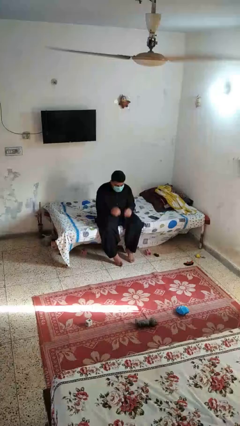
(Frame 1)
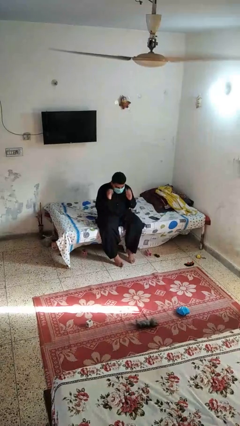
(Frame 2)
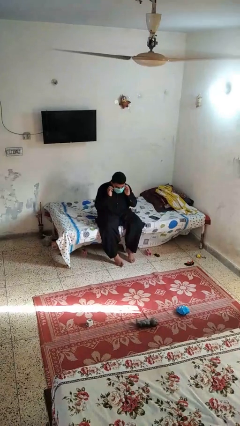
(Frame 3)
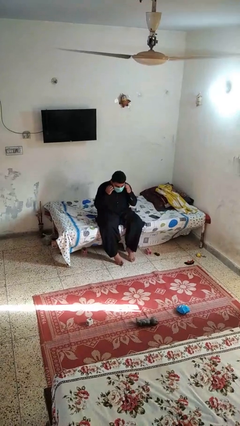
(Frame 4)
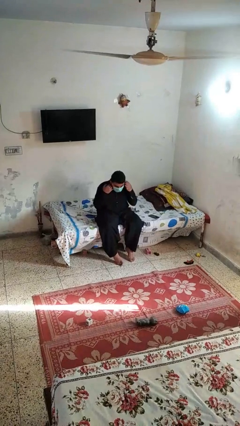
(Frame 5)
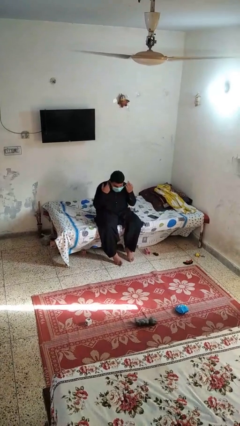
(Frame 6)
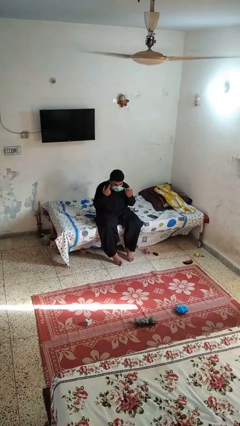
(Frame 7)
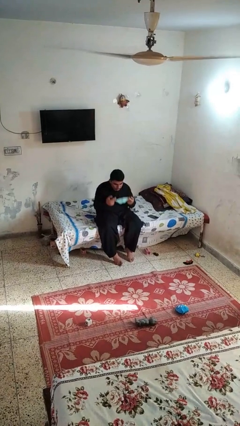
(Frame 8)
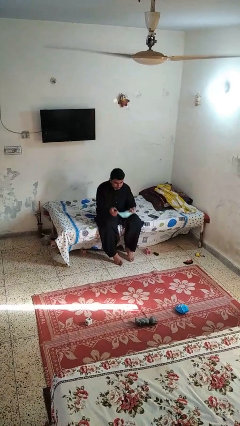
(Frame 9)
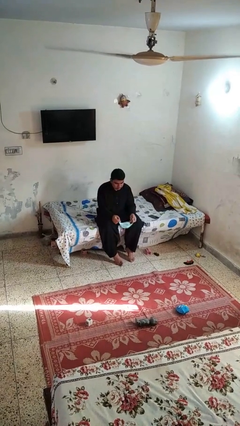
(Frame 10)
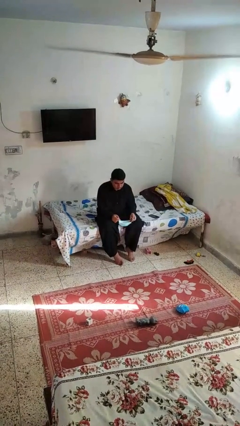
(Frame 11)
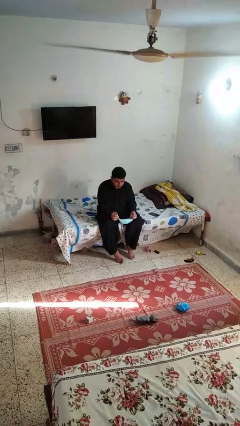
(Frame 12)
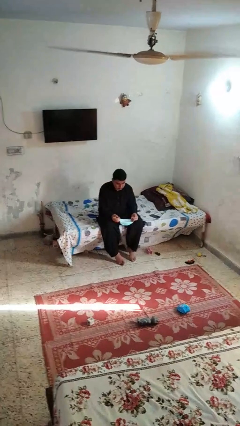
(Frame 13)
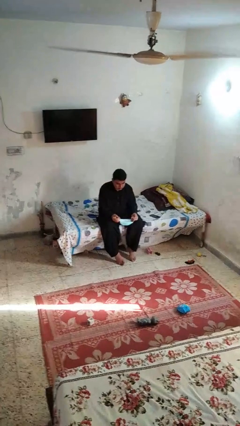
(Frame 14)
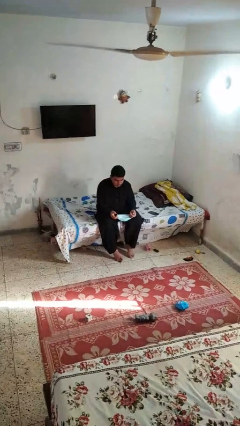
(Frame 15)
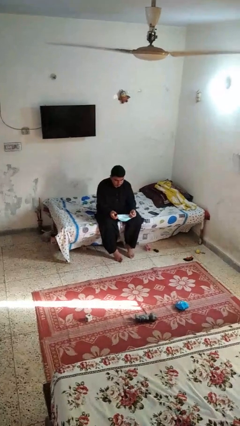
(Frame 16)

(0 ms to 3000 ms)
person takes off facemask

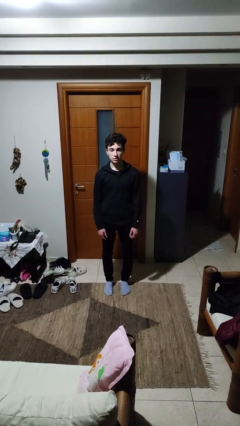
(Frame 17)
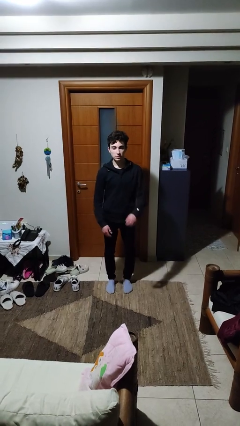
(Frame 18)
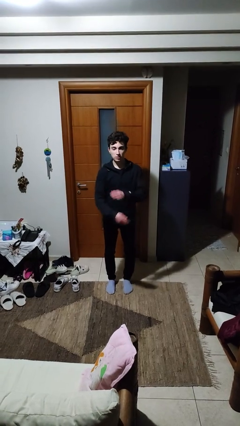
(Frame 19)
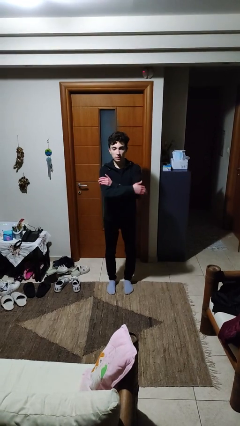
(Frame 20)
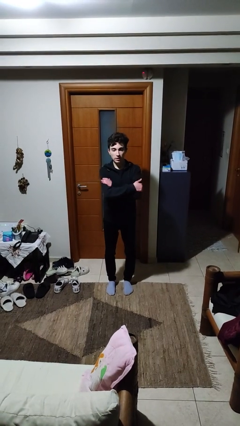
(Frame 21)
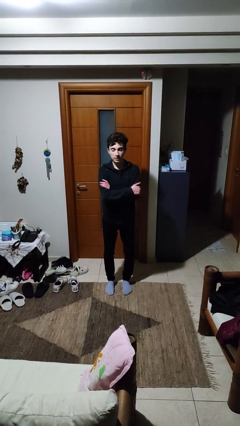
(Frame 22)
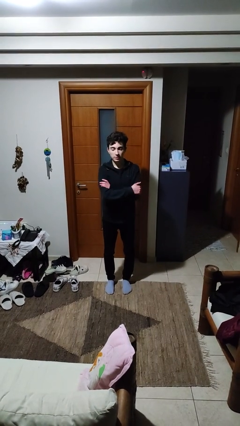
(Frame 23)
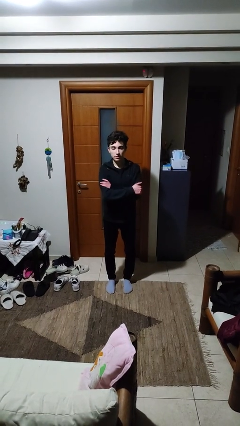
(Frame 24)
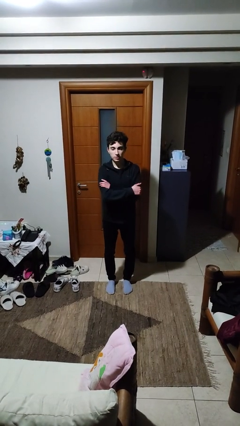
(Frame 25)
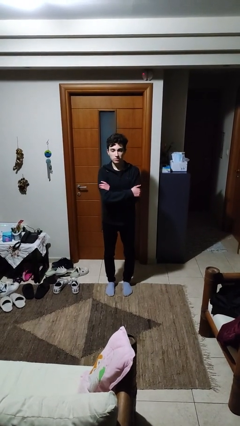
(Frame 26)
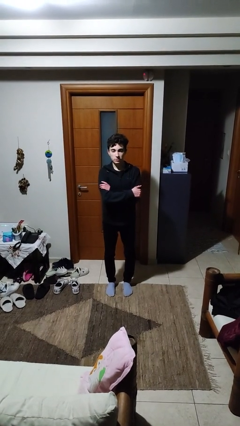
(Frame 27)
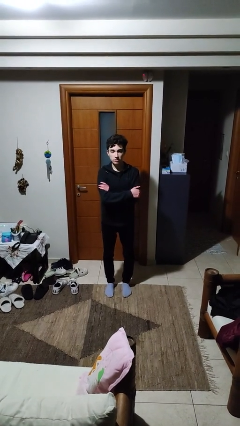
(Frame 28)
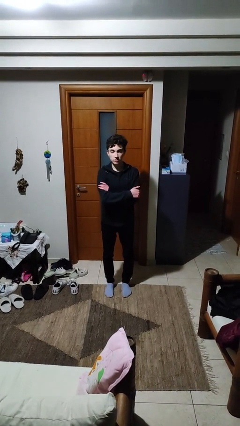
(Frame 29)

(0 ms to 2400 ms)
person crosses arms

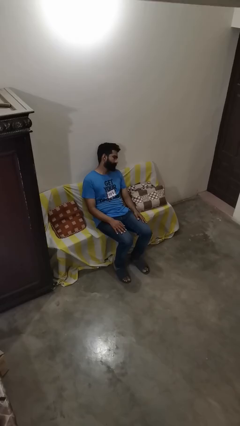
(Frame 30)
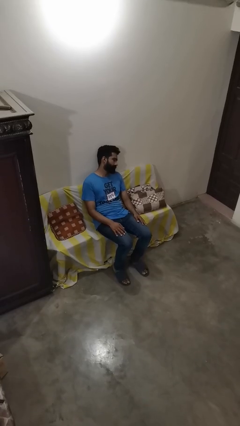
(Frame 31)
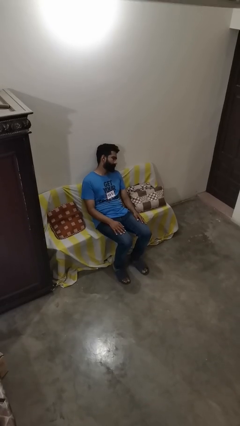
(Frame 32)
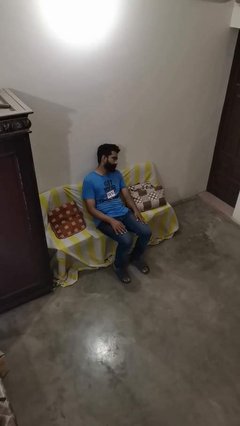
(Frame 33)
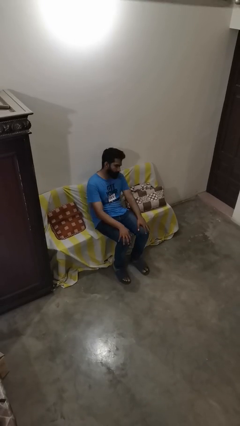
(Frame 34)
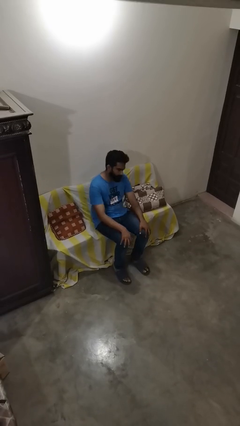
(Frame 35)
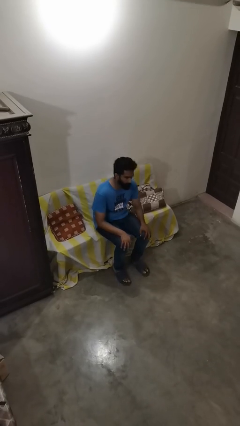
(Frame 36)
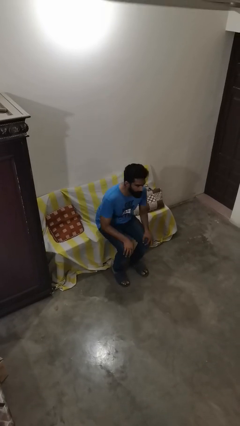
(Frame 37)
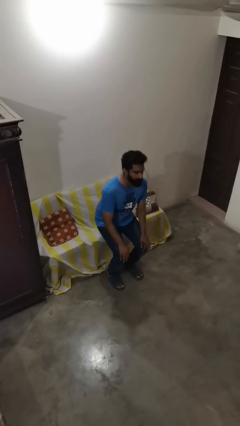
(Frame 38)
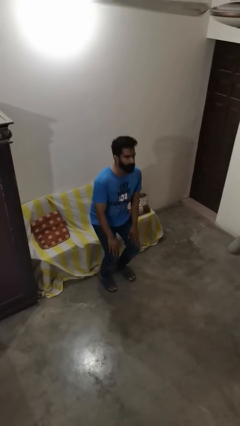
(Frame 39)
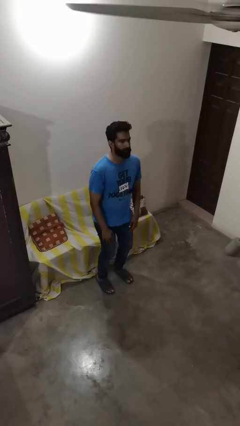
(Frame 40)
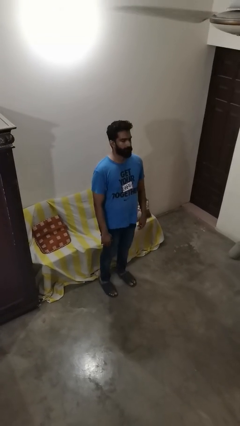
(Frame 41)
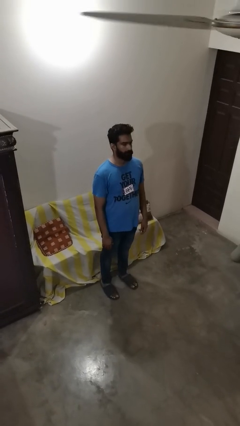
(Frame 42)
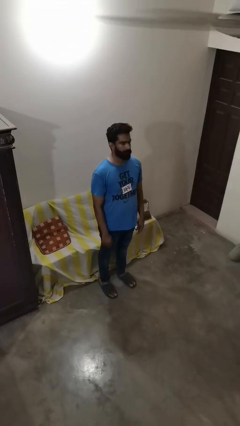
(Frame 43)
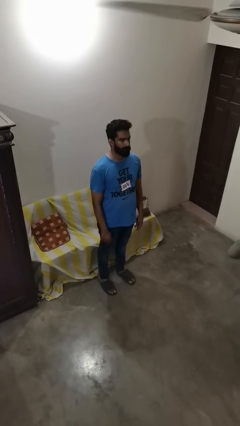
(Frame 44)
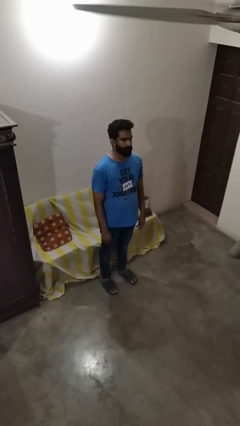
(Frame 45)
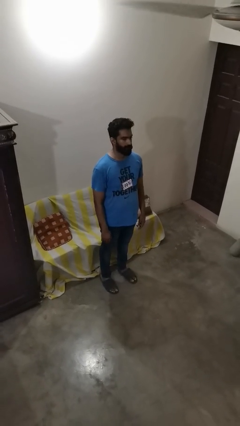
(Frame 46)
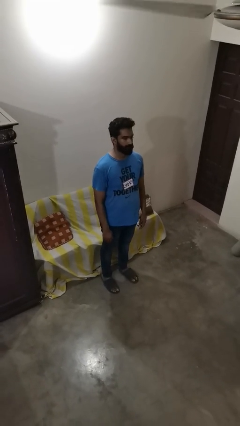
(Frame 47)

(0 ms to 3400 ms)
person stands up

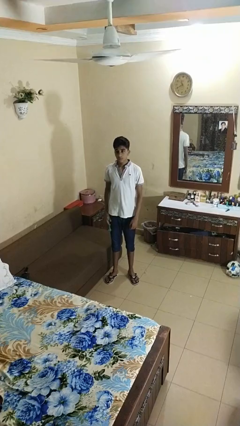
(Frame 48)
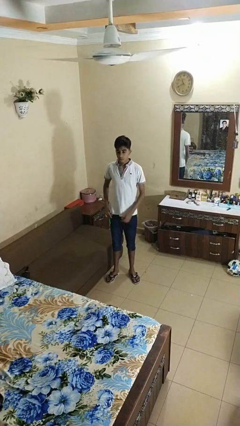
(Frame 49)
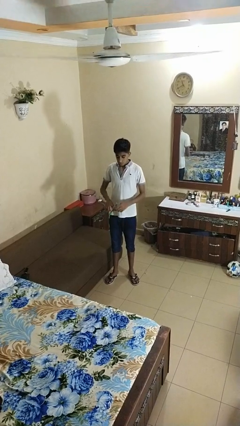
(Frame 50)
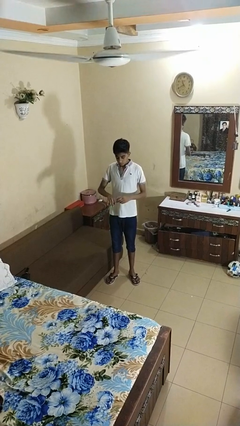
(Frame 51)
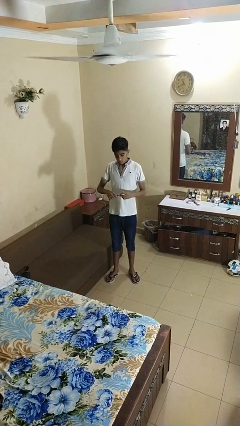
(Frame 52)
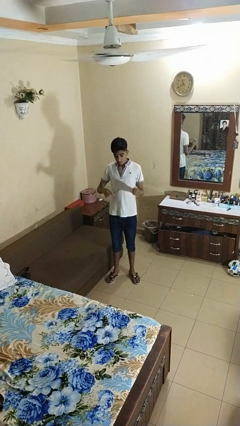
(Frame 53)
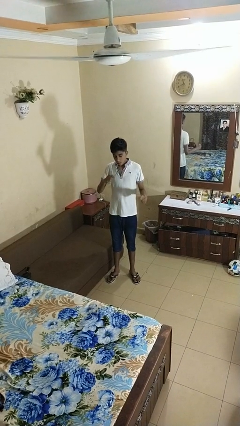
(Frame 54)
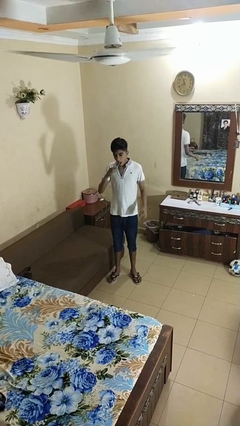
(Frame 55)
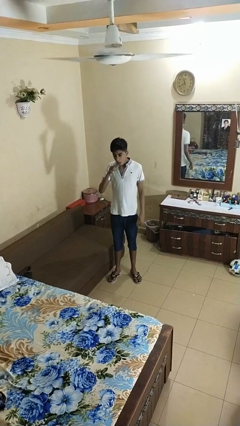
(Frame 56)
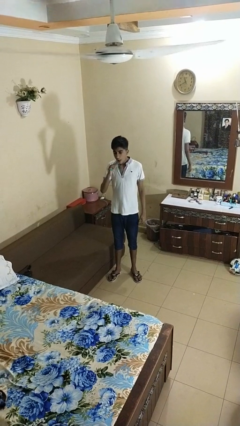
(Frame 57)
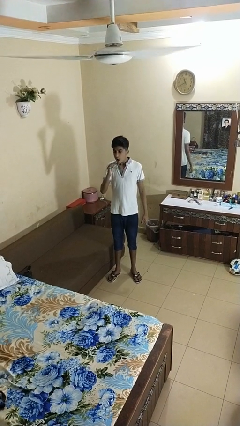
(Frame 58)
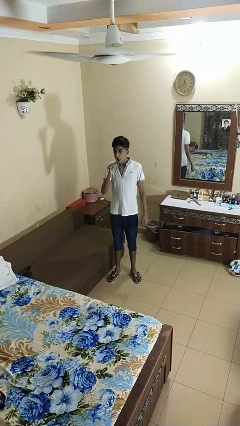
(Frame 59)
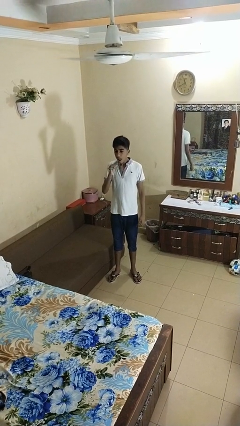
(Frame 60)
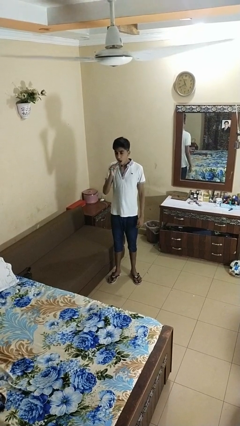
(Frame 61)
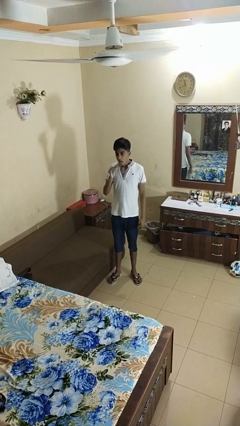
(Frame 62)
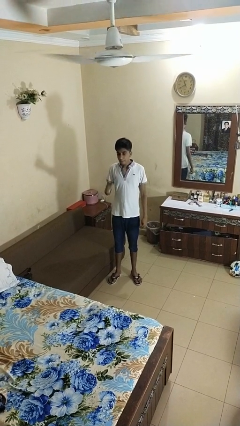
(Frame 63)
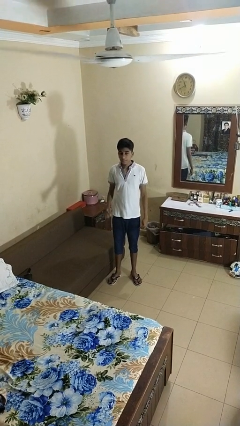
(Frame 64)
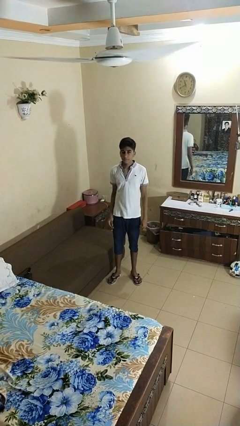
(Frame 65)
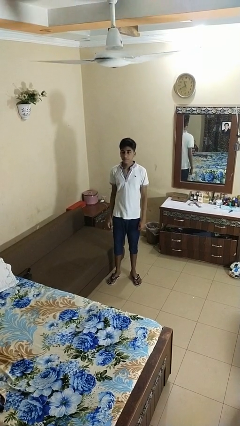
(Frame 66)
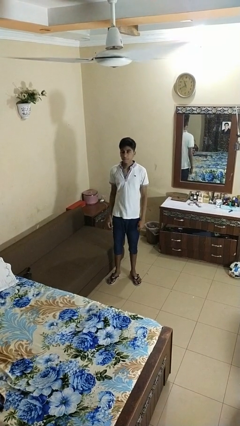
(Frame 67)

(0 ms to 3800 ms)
person brushes teeth

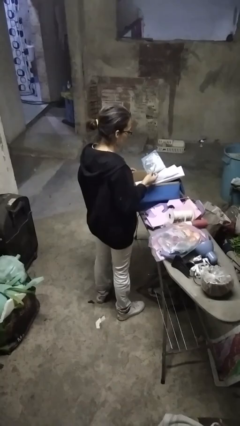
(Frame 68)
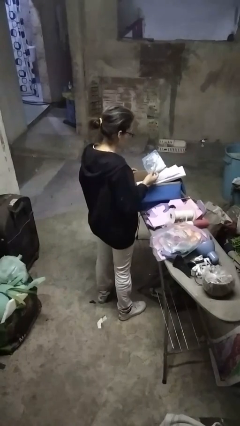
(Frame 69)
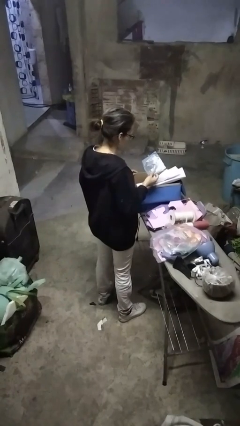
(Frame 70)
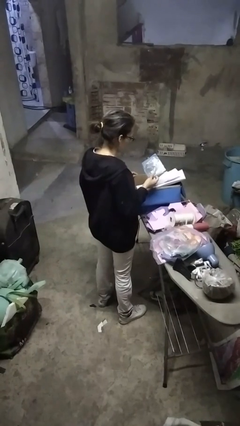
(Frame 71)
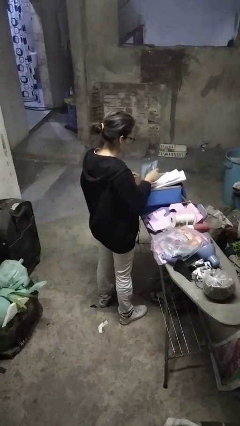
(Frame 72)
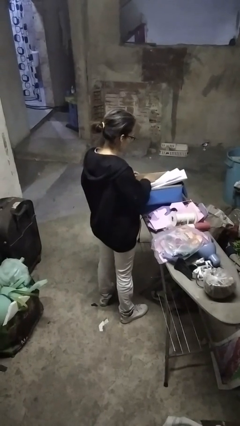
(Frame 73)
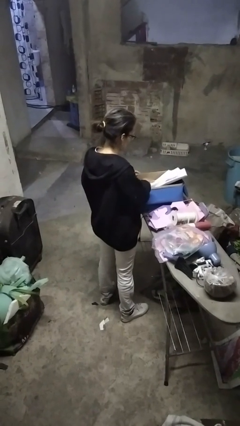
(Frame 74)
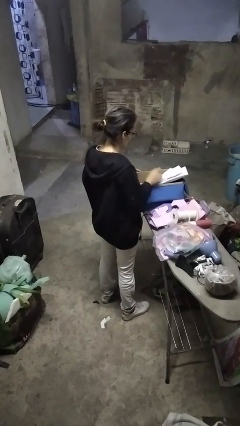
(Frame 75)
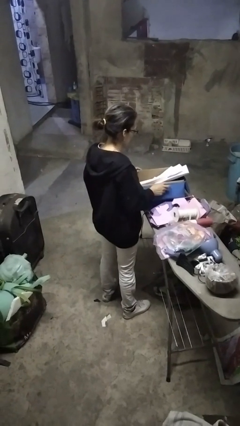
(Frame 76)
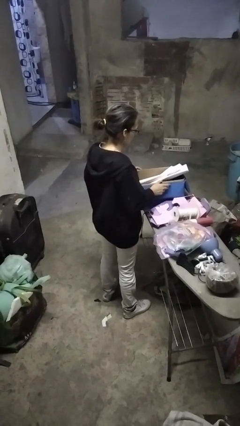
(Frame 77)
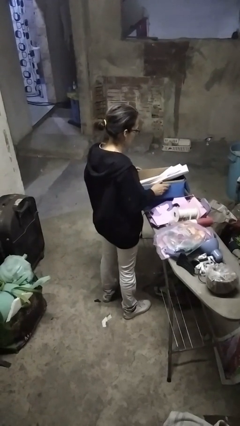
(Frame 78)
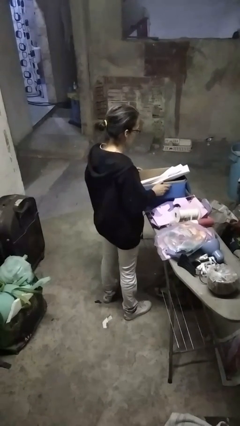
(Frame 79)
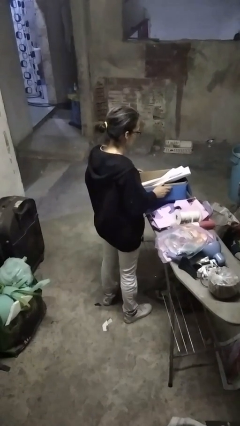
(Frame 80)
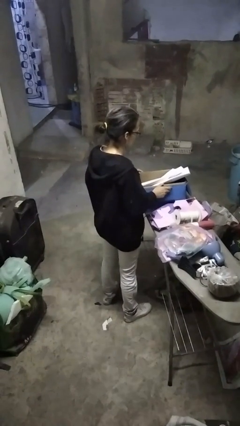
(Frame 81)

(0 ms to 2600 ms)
person puts object into box

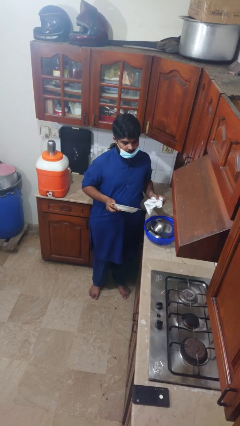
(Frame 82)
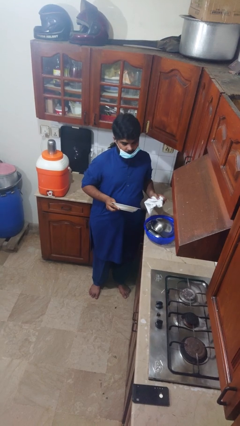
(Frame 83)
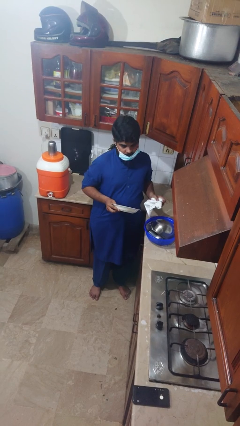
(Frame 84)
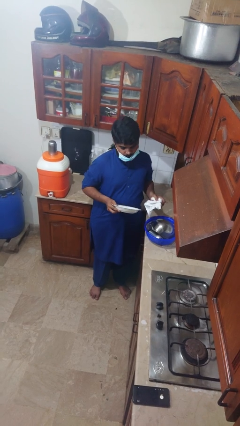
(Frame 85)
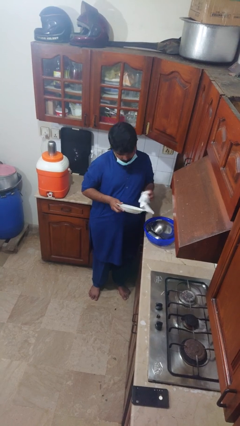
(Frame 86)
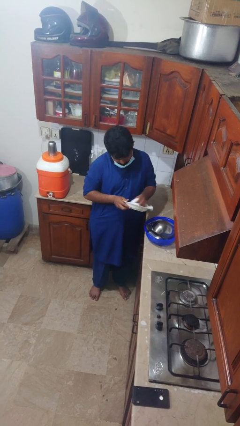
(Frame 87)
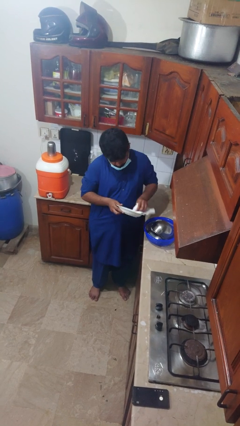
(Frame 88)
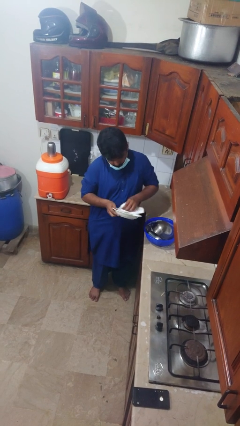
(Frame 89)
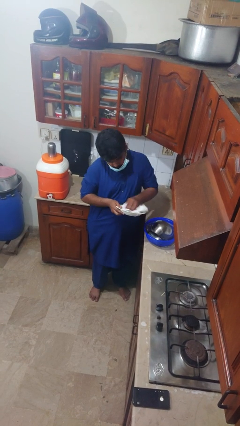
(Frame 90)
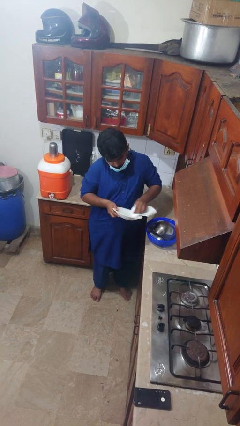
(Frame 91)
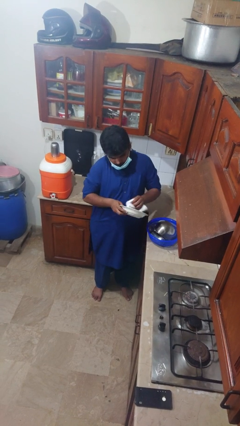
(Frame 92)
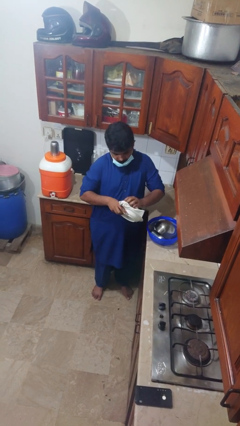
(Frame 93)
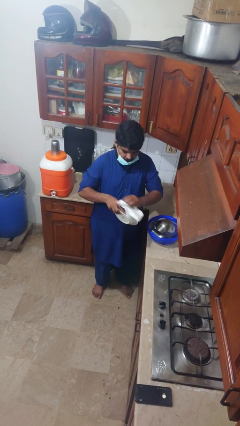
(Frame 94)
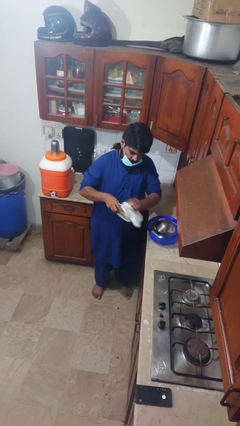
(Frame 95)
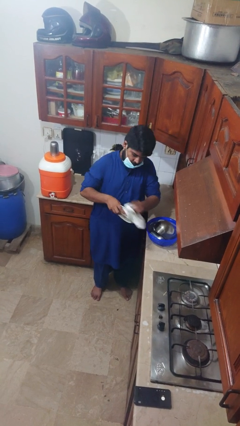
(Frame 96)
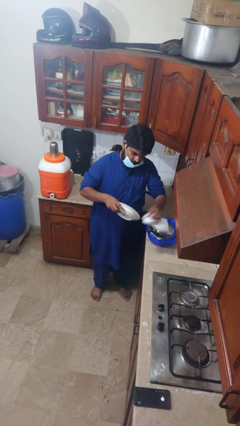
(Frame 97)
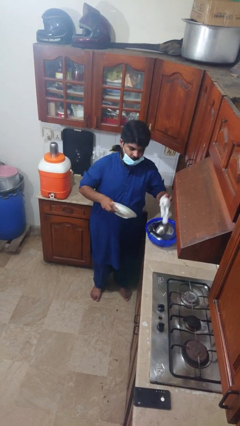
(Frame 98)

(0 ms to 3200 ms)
person dries dish
